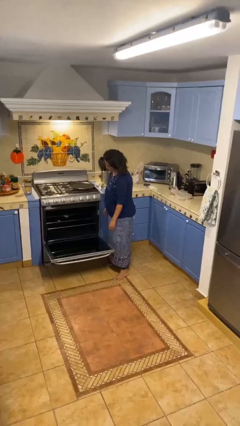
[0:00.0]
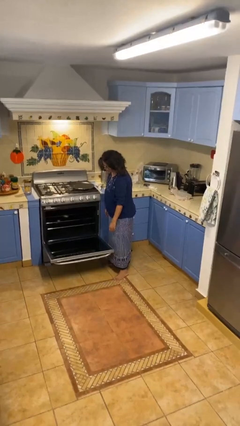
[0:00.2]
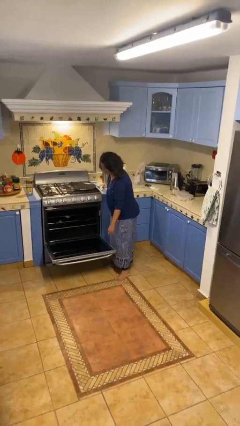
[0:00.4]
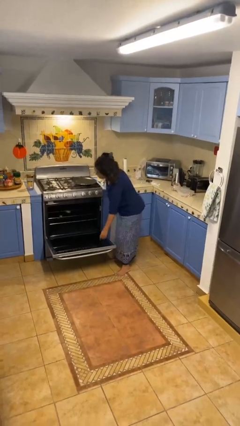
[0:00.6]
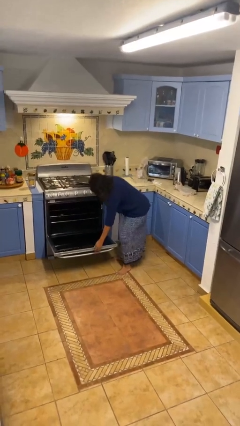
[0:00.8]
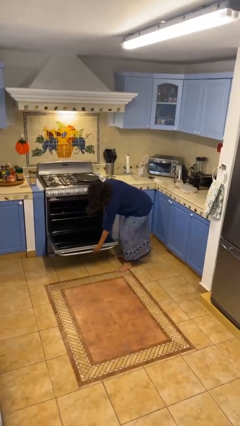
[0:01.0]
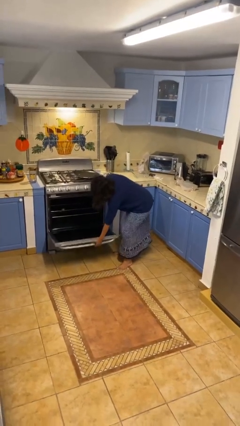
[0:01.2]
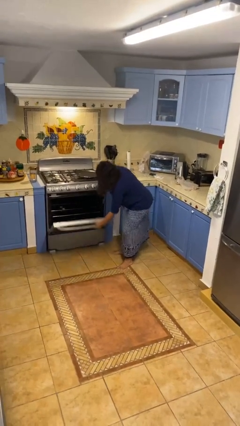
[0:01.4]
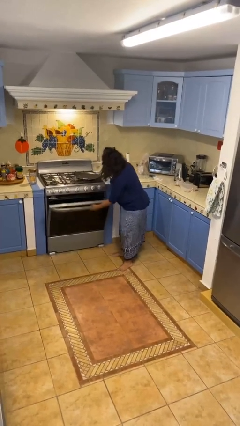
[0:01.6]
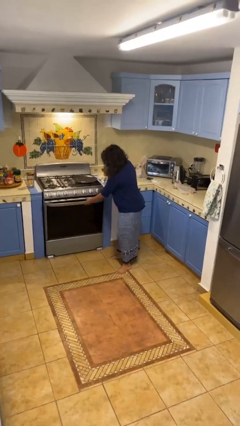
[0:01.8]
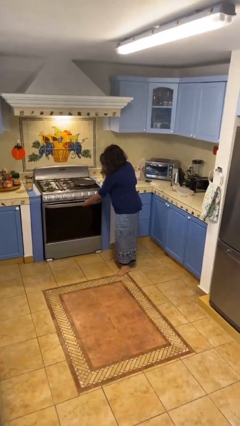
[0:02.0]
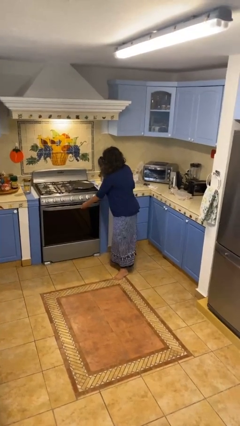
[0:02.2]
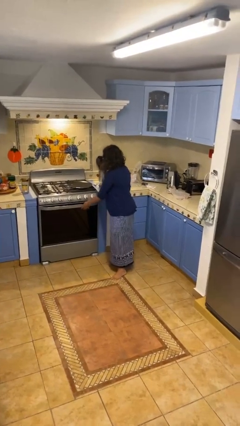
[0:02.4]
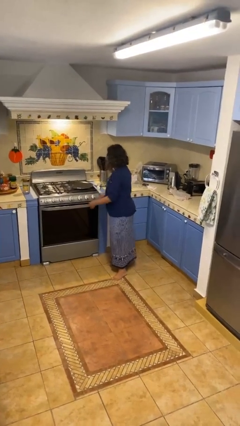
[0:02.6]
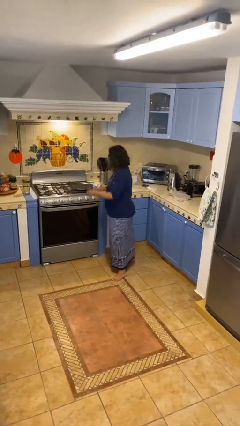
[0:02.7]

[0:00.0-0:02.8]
person closes oven door

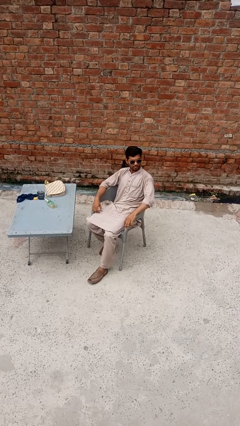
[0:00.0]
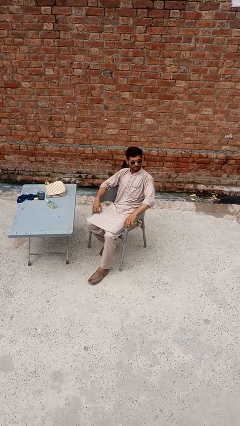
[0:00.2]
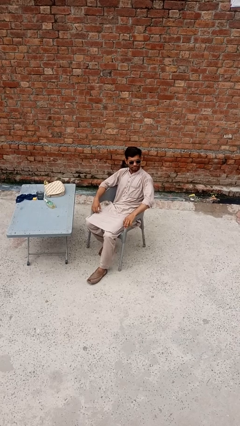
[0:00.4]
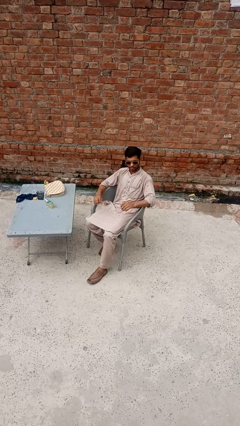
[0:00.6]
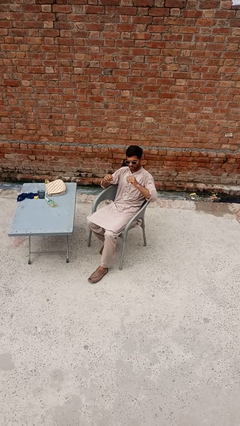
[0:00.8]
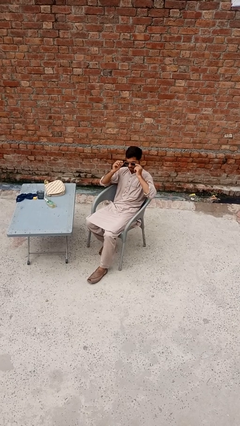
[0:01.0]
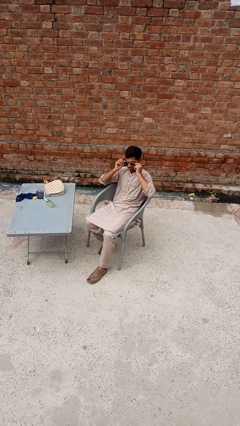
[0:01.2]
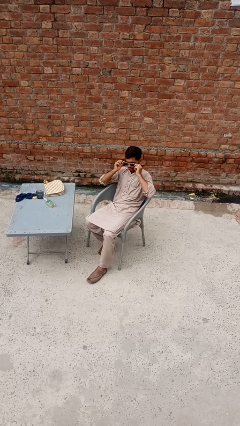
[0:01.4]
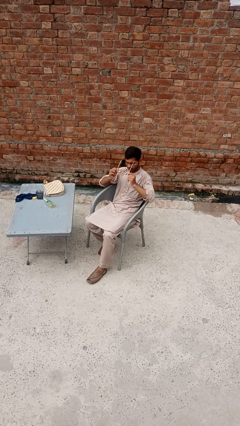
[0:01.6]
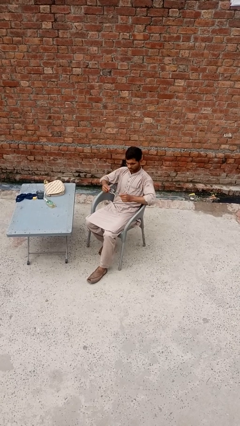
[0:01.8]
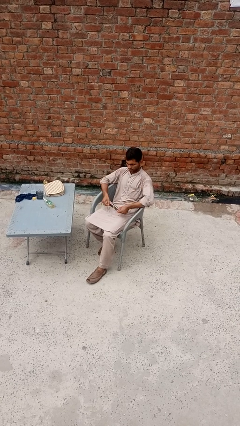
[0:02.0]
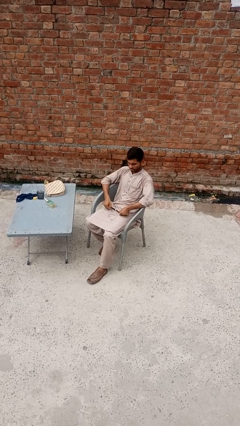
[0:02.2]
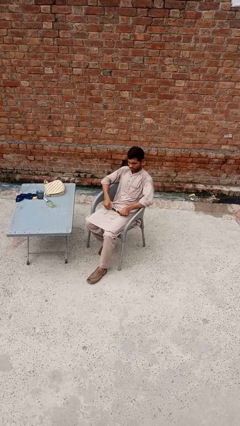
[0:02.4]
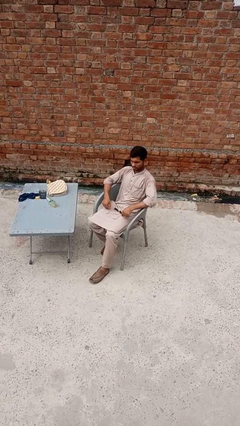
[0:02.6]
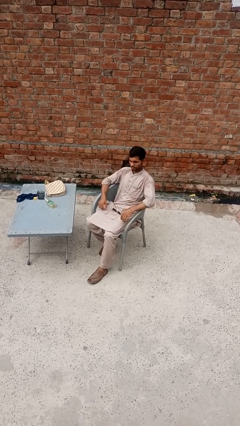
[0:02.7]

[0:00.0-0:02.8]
person takes off sunglasses

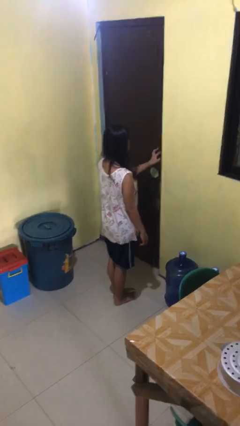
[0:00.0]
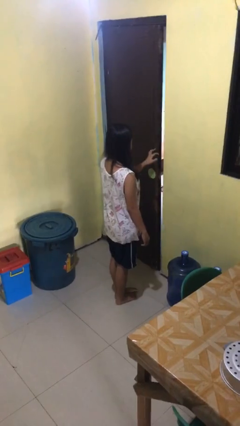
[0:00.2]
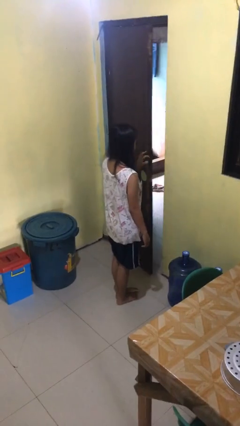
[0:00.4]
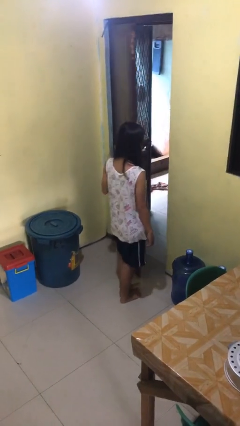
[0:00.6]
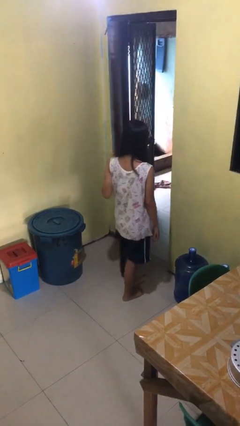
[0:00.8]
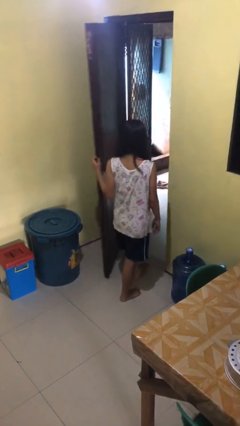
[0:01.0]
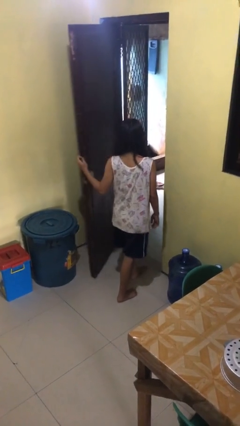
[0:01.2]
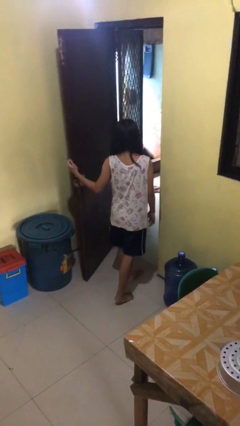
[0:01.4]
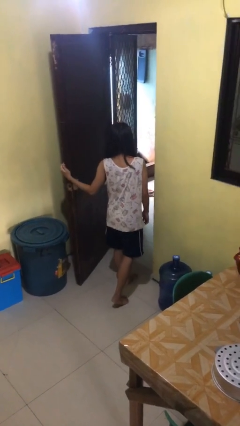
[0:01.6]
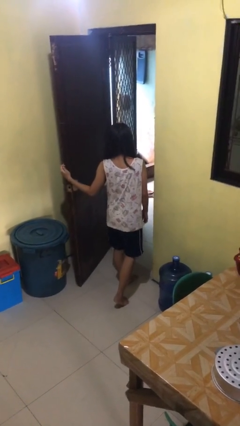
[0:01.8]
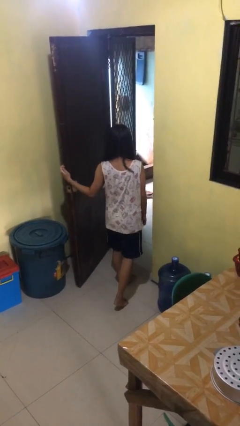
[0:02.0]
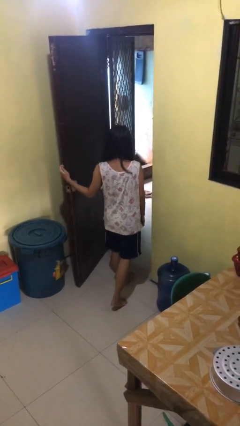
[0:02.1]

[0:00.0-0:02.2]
person opens facility door

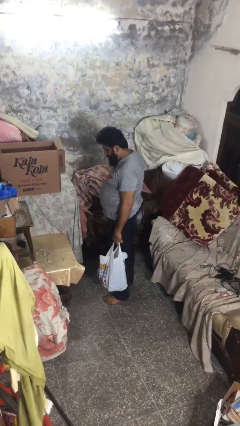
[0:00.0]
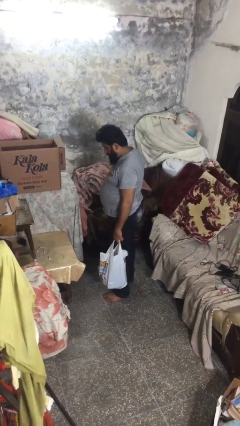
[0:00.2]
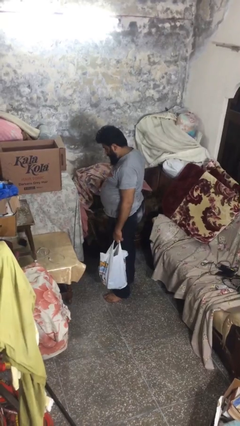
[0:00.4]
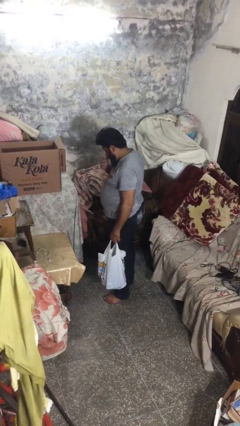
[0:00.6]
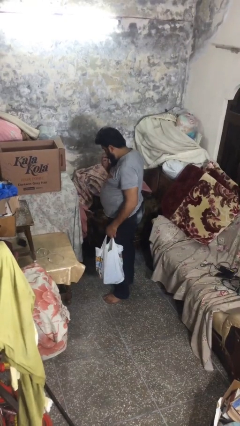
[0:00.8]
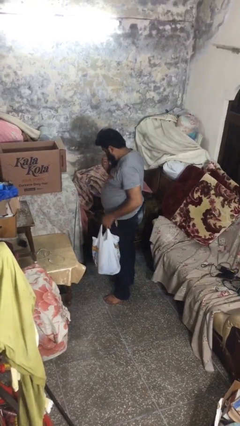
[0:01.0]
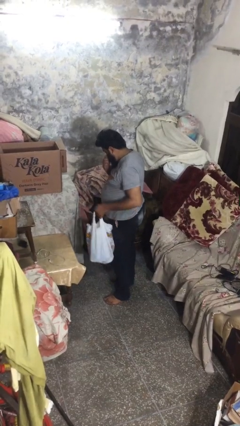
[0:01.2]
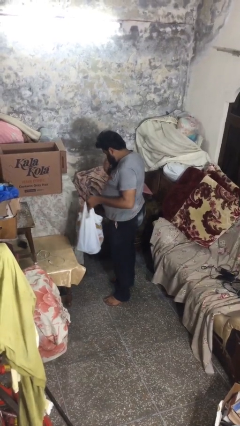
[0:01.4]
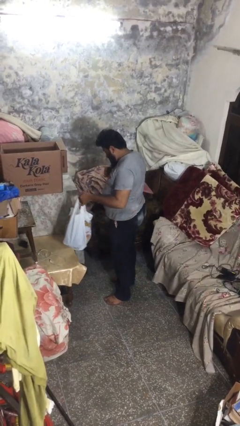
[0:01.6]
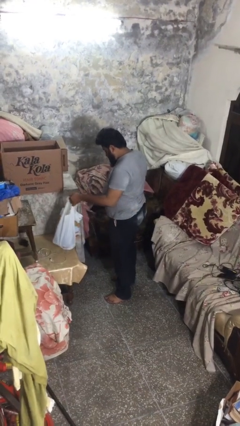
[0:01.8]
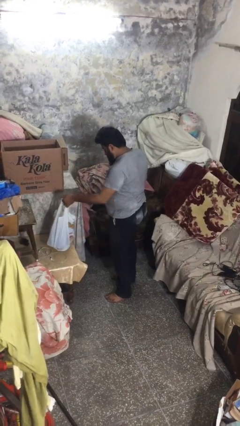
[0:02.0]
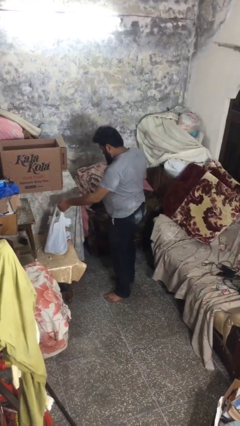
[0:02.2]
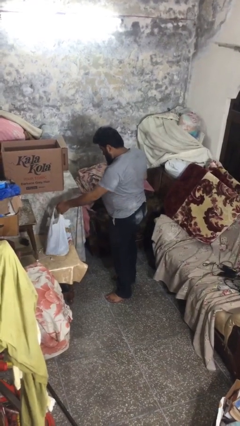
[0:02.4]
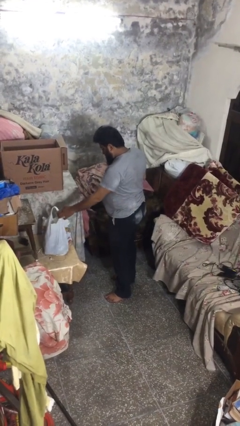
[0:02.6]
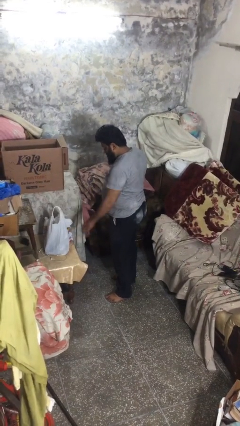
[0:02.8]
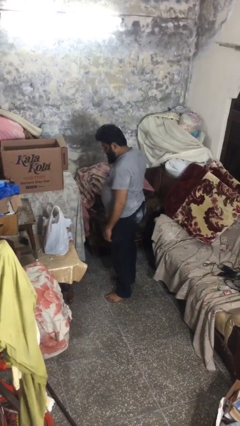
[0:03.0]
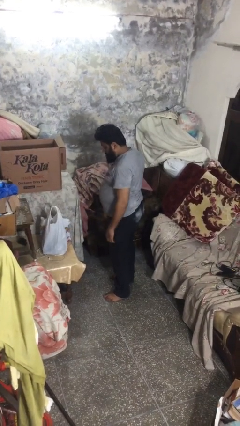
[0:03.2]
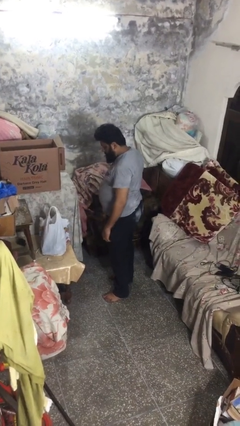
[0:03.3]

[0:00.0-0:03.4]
person puts down object on table

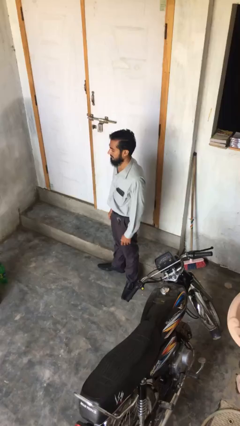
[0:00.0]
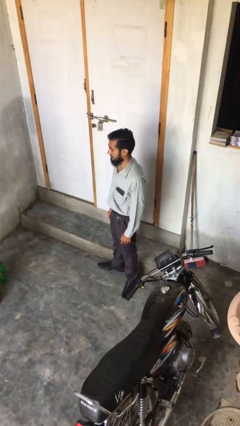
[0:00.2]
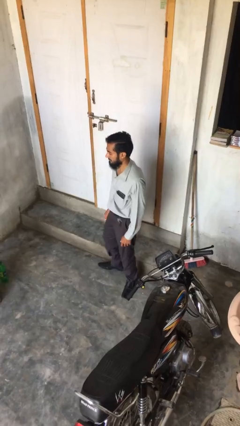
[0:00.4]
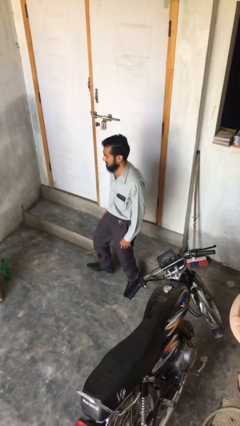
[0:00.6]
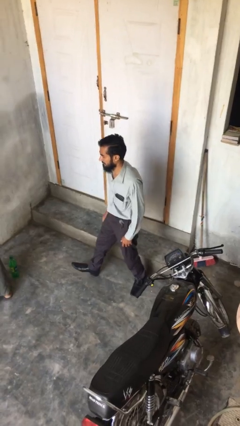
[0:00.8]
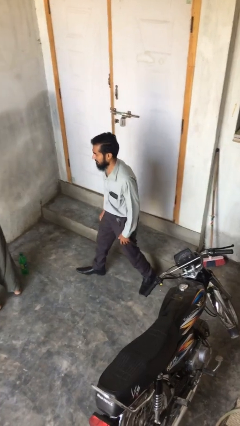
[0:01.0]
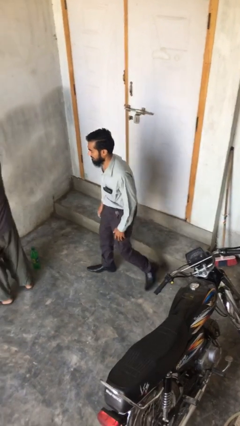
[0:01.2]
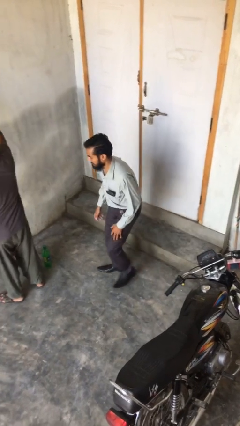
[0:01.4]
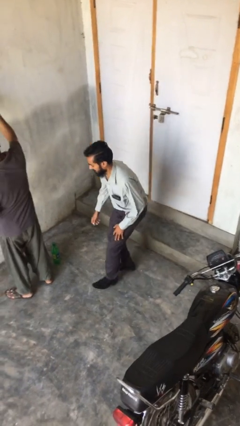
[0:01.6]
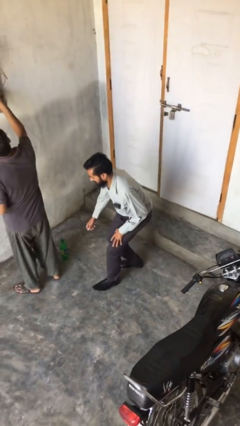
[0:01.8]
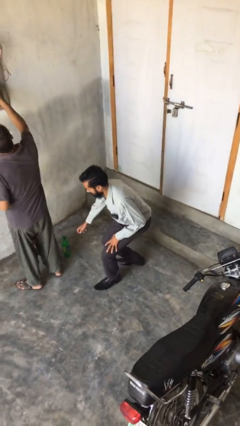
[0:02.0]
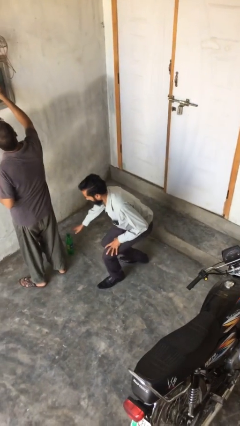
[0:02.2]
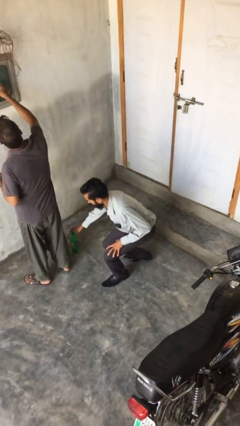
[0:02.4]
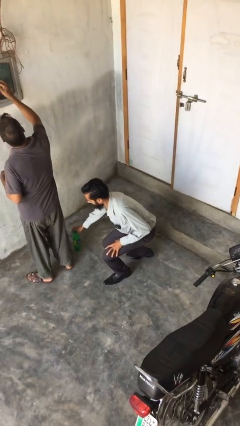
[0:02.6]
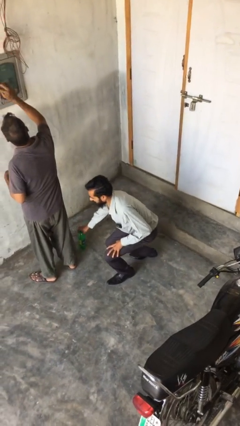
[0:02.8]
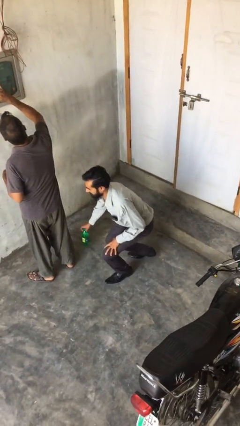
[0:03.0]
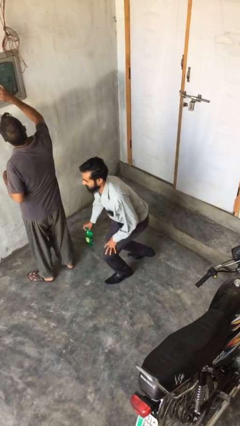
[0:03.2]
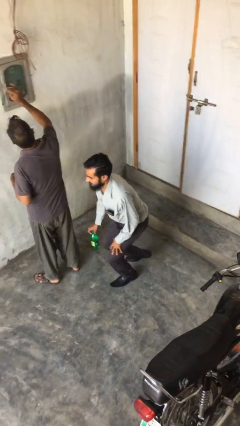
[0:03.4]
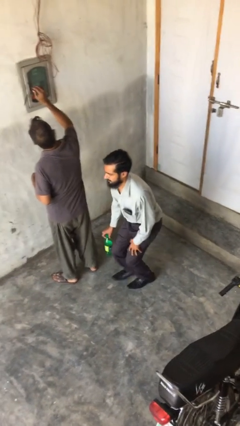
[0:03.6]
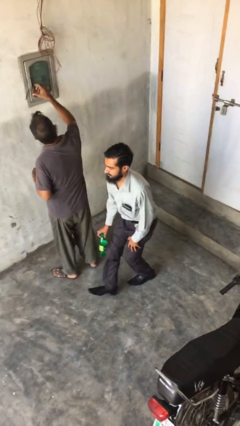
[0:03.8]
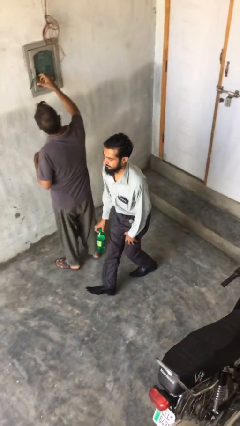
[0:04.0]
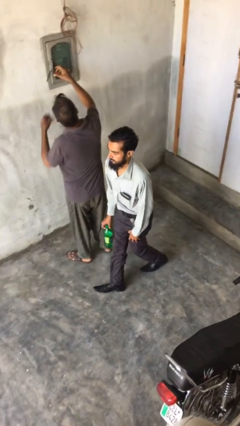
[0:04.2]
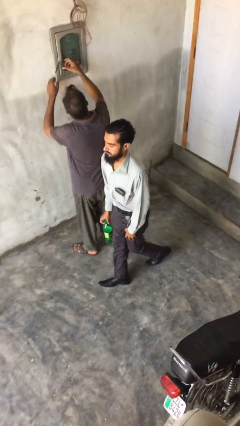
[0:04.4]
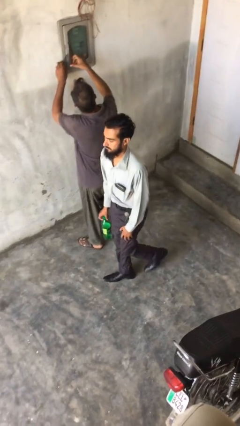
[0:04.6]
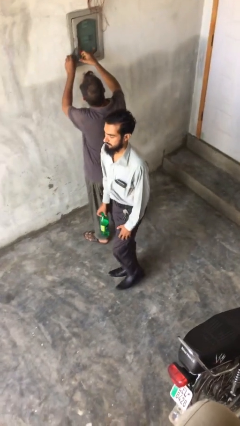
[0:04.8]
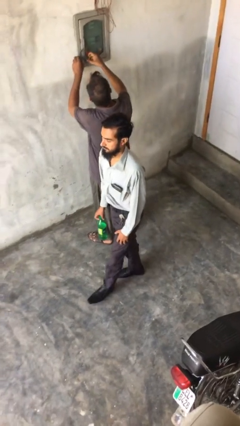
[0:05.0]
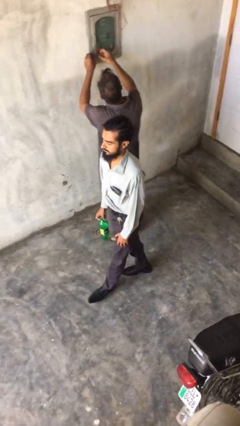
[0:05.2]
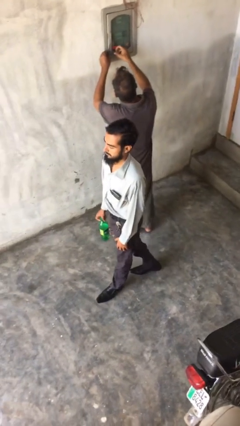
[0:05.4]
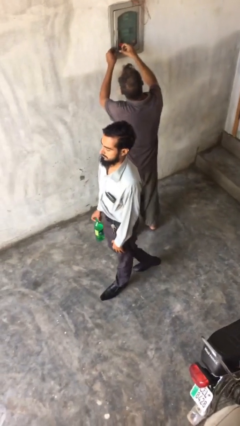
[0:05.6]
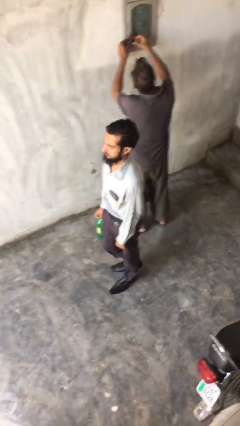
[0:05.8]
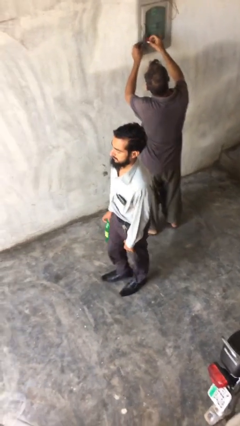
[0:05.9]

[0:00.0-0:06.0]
person steals object from person

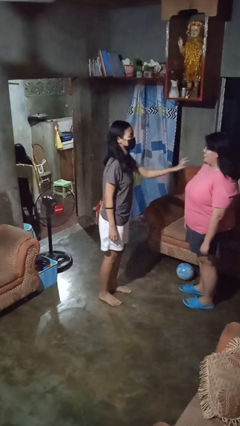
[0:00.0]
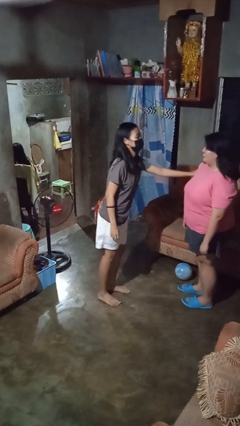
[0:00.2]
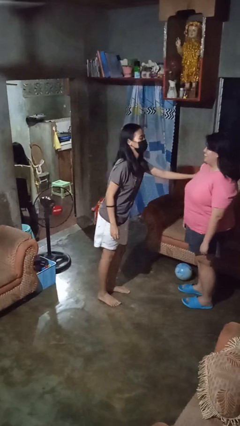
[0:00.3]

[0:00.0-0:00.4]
person shoves person
